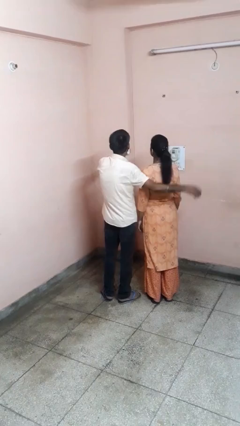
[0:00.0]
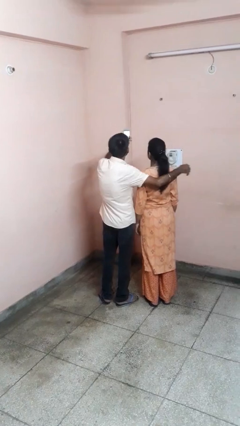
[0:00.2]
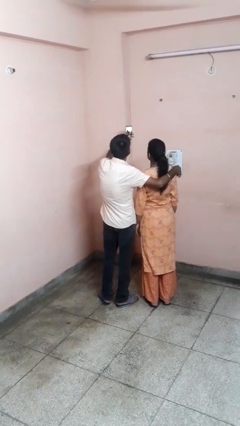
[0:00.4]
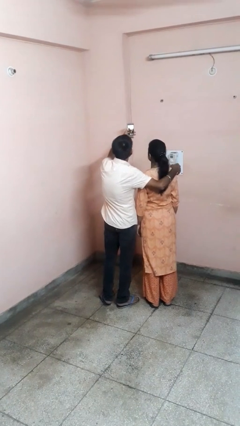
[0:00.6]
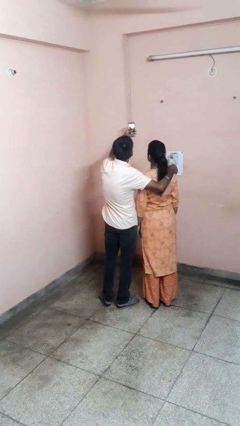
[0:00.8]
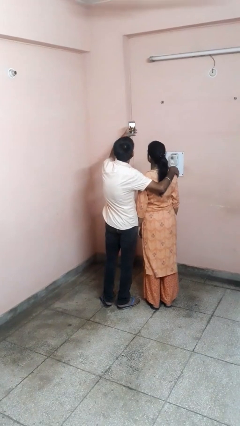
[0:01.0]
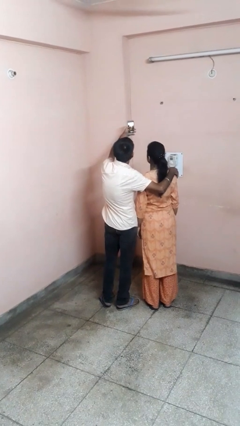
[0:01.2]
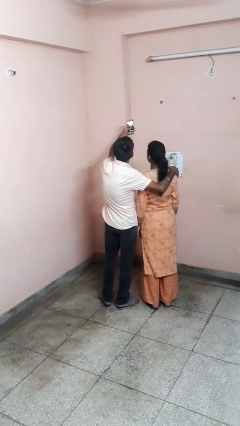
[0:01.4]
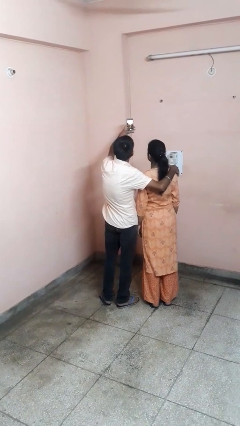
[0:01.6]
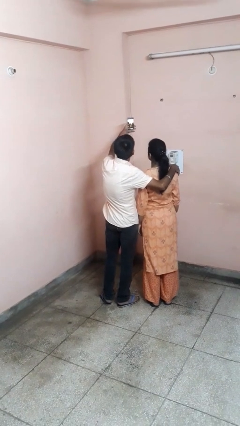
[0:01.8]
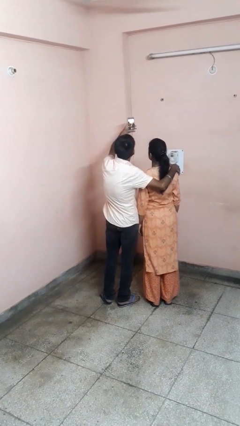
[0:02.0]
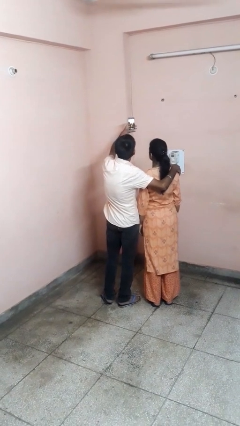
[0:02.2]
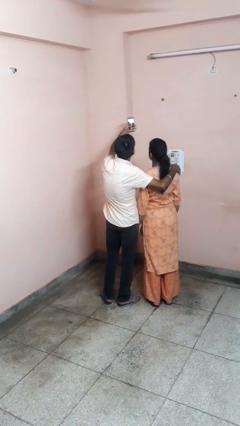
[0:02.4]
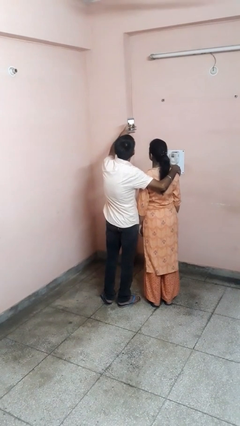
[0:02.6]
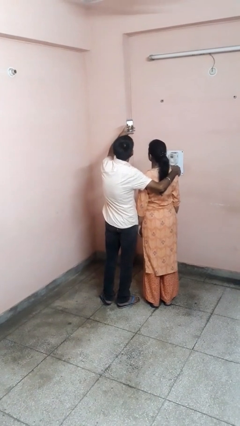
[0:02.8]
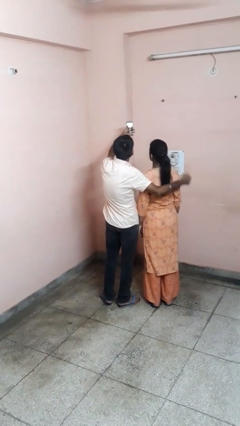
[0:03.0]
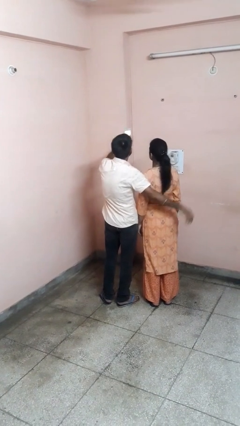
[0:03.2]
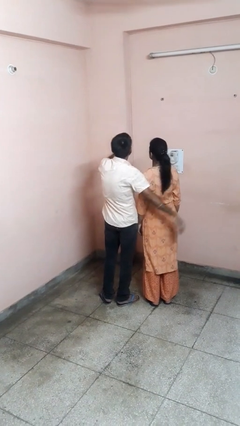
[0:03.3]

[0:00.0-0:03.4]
person takes selfie with person

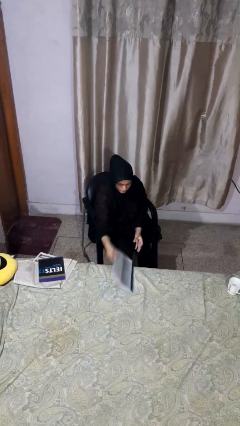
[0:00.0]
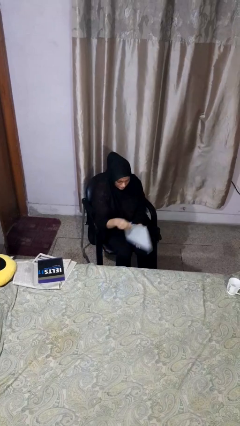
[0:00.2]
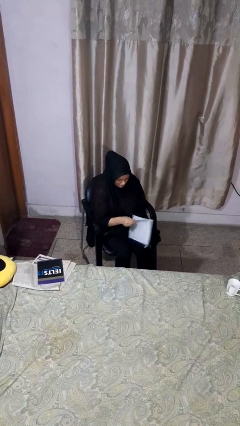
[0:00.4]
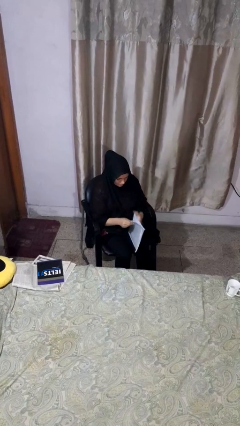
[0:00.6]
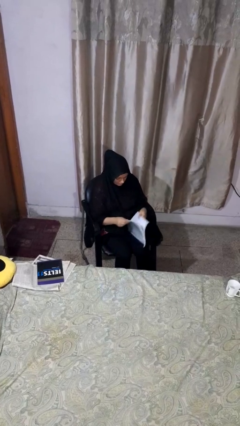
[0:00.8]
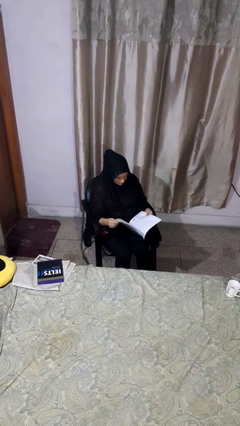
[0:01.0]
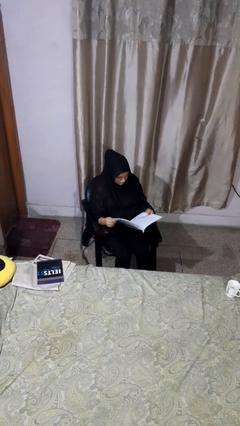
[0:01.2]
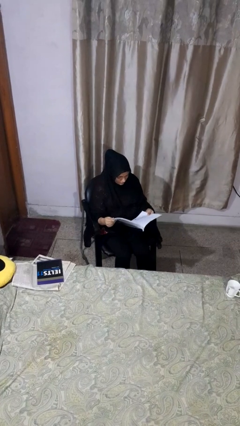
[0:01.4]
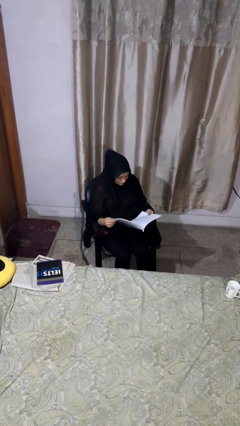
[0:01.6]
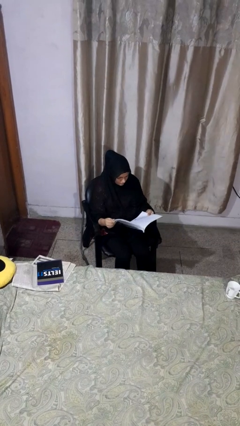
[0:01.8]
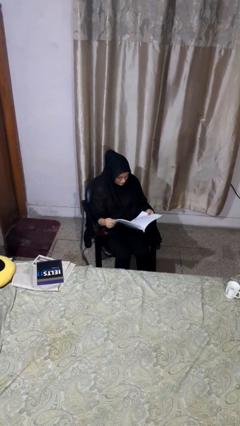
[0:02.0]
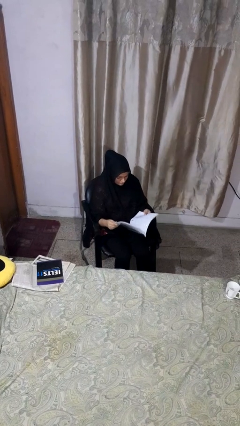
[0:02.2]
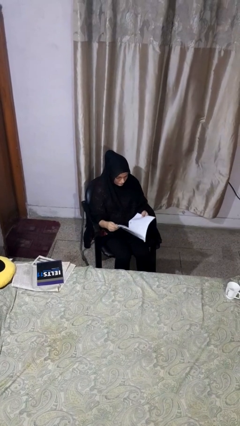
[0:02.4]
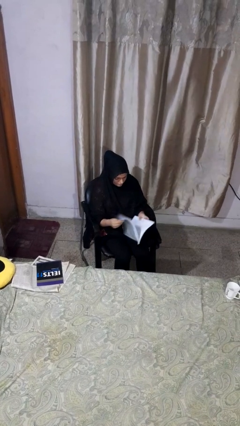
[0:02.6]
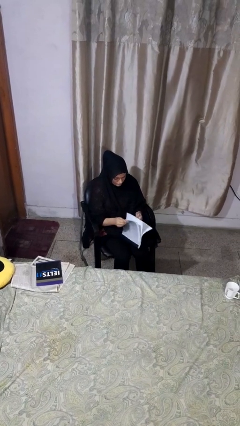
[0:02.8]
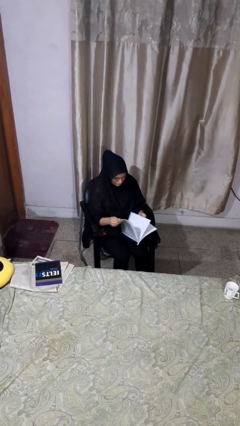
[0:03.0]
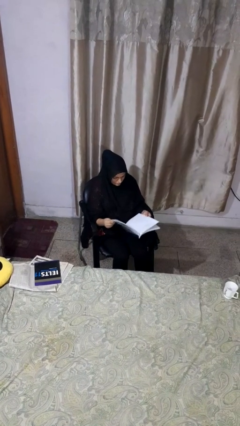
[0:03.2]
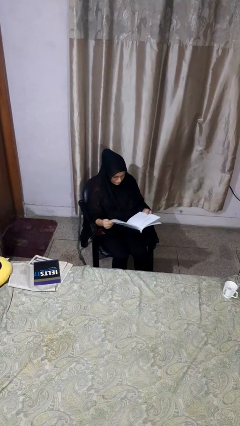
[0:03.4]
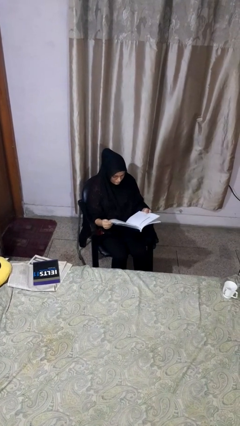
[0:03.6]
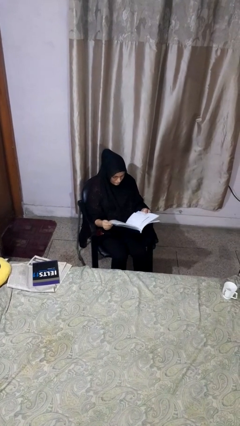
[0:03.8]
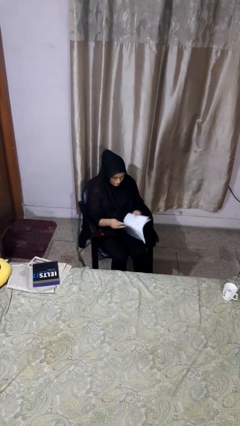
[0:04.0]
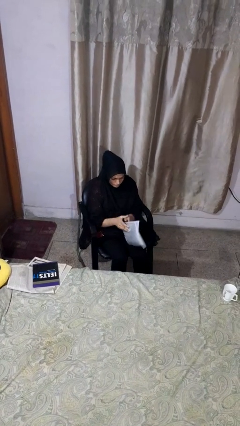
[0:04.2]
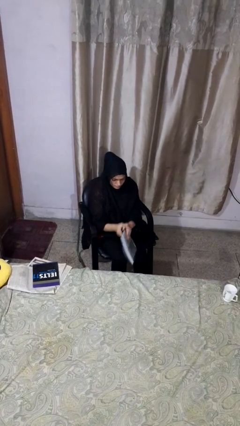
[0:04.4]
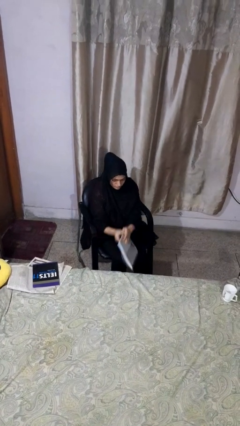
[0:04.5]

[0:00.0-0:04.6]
person reads magazine

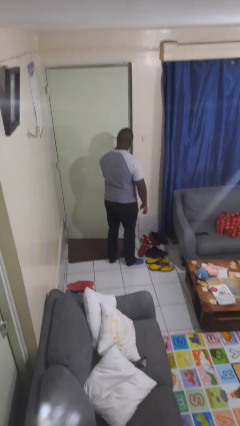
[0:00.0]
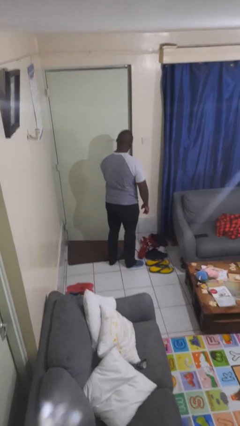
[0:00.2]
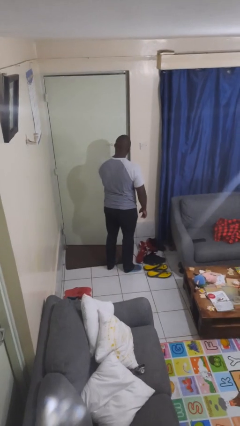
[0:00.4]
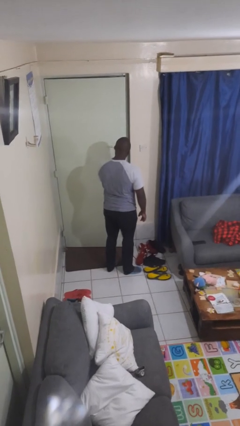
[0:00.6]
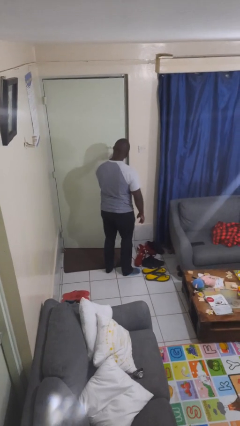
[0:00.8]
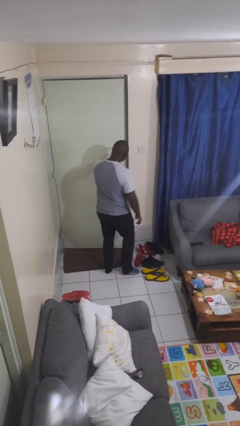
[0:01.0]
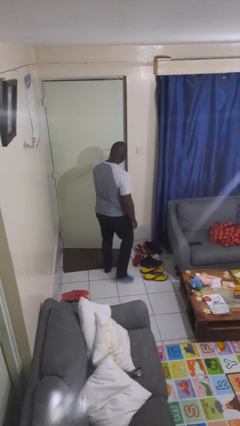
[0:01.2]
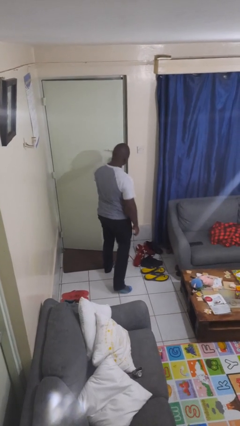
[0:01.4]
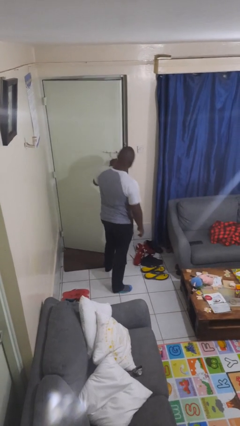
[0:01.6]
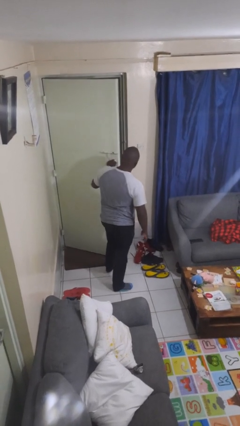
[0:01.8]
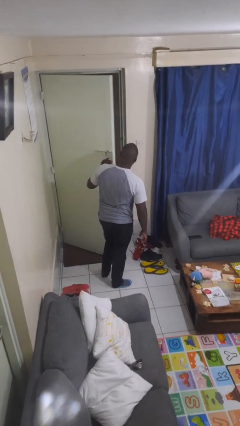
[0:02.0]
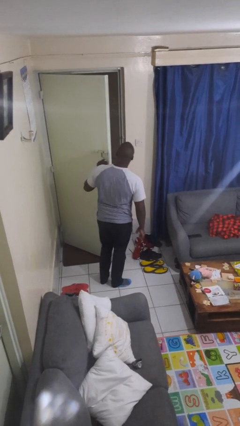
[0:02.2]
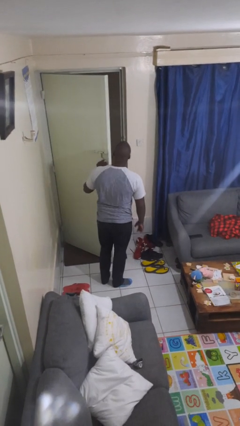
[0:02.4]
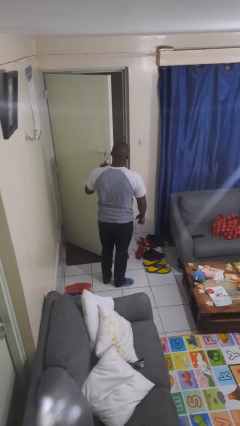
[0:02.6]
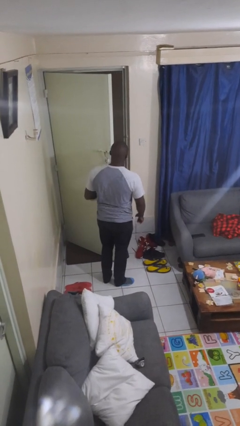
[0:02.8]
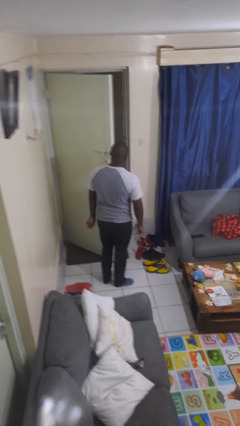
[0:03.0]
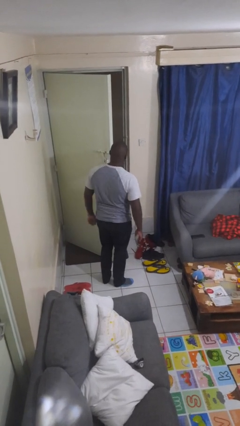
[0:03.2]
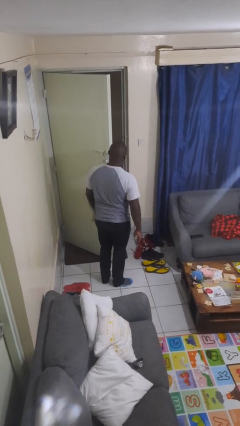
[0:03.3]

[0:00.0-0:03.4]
person opens facility door

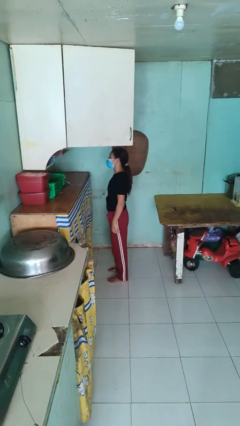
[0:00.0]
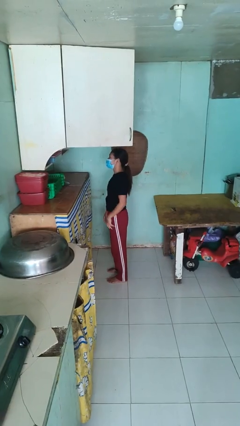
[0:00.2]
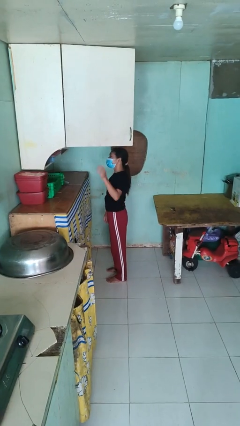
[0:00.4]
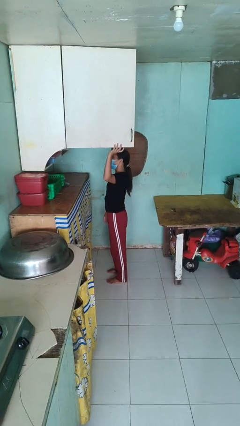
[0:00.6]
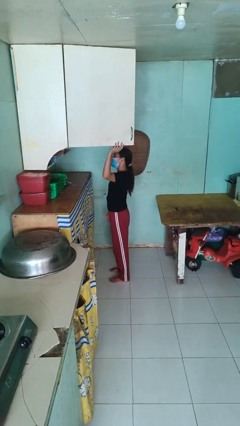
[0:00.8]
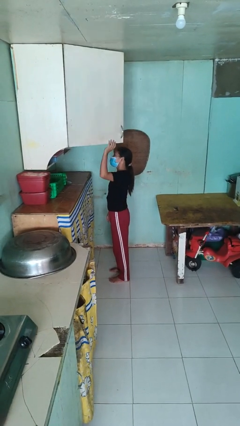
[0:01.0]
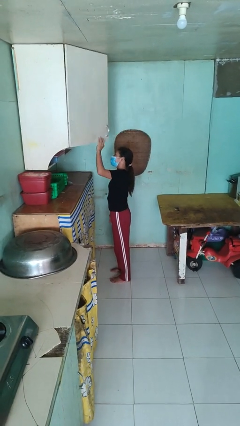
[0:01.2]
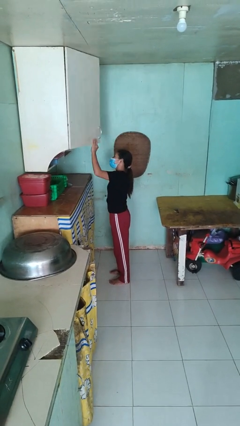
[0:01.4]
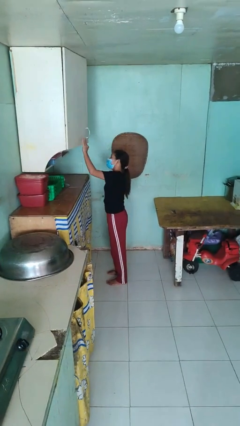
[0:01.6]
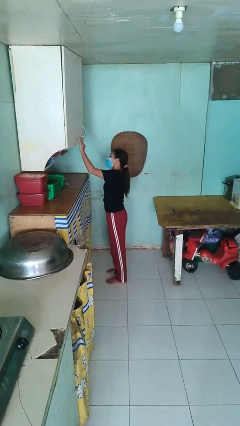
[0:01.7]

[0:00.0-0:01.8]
person closes cabinet

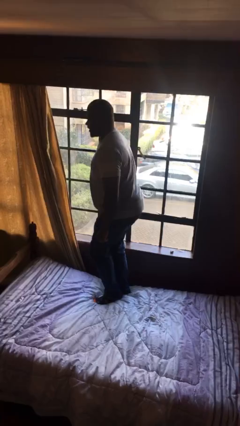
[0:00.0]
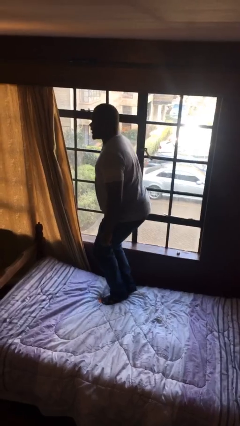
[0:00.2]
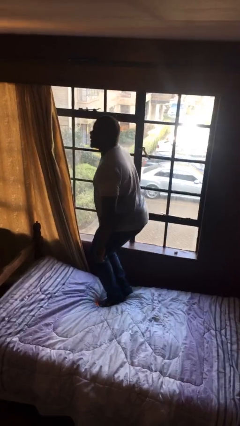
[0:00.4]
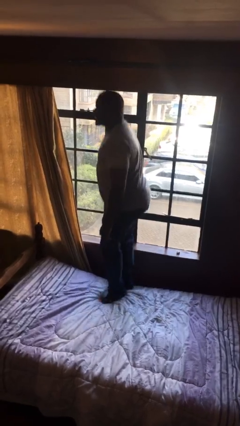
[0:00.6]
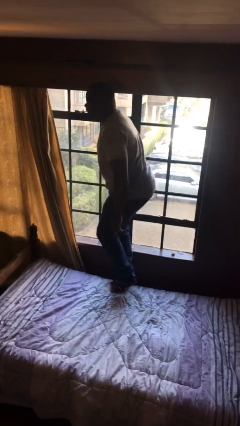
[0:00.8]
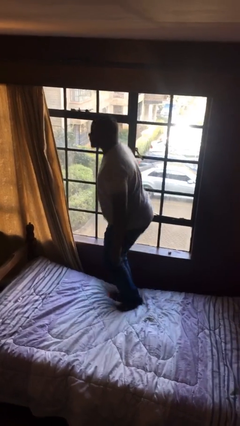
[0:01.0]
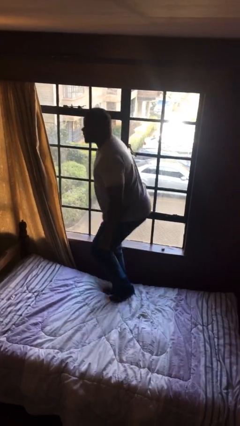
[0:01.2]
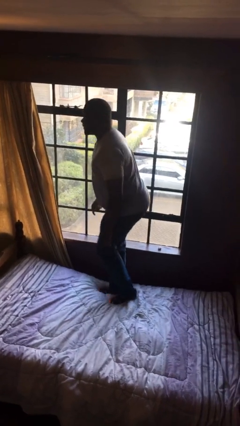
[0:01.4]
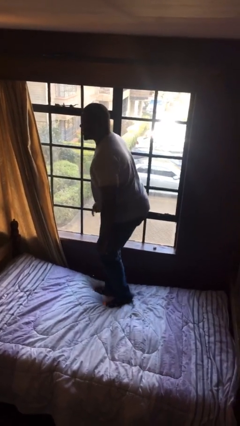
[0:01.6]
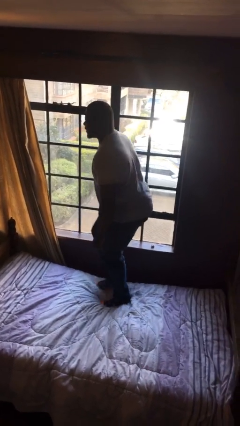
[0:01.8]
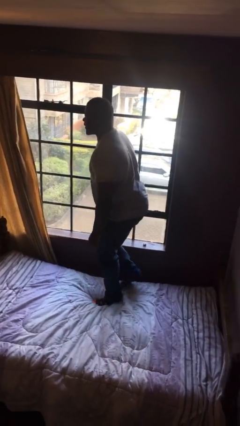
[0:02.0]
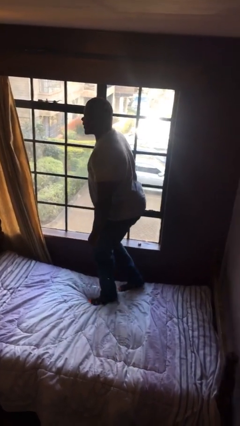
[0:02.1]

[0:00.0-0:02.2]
person jumps on bed

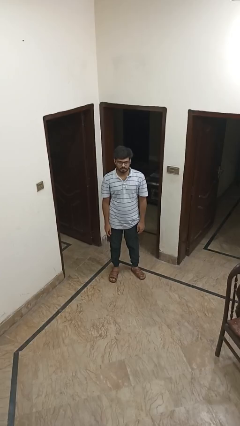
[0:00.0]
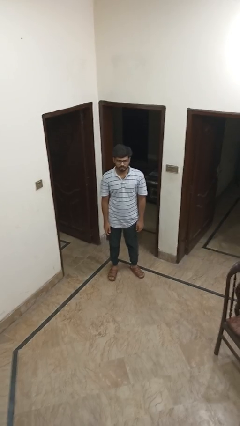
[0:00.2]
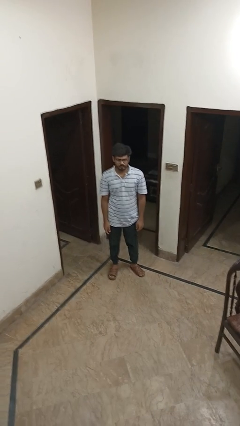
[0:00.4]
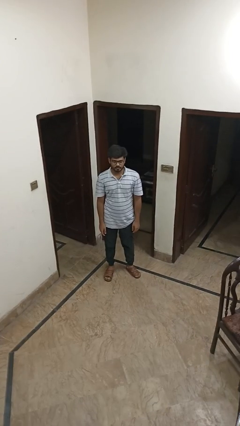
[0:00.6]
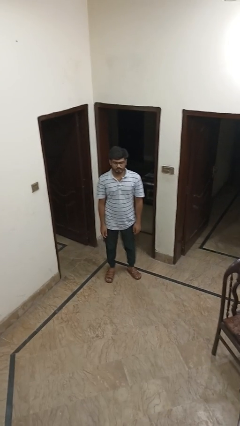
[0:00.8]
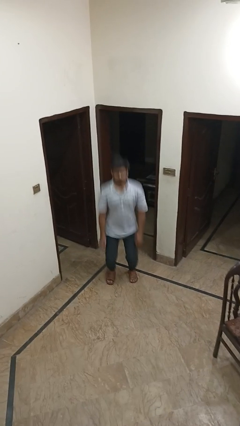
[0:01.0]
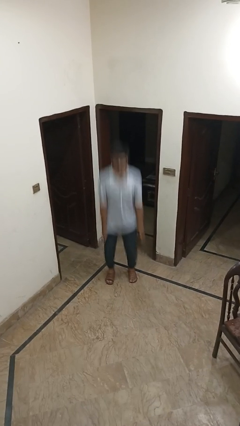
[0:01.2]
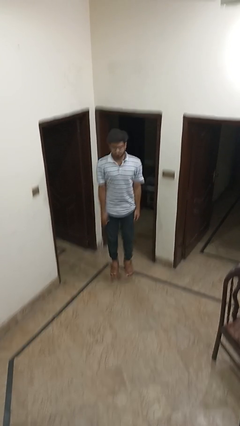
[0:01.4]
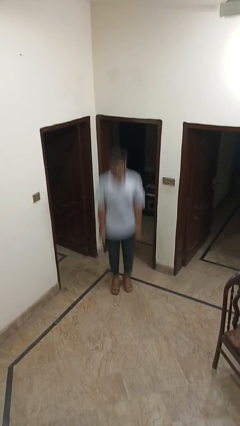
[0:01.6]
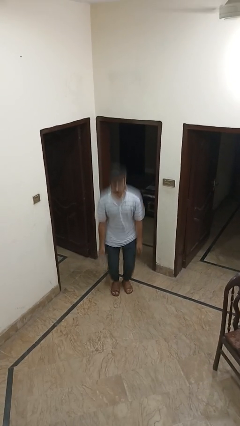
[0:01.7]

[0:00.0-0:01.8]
person jumps
